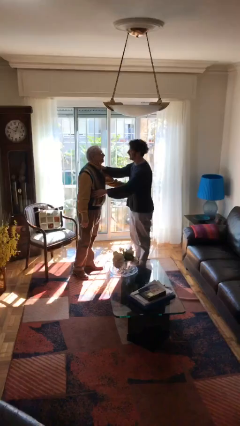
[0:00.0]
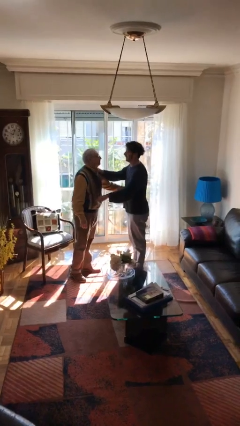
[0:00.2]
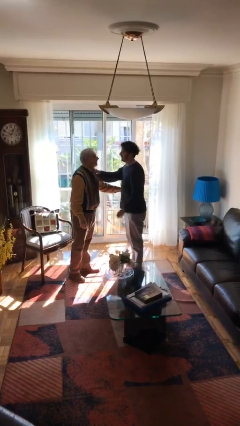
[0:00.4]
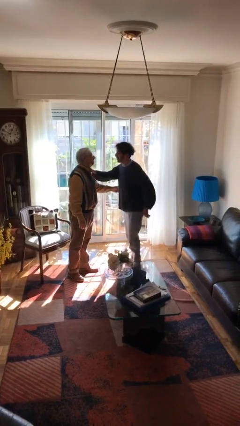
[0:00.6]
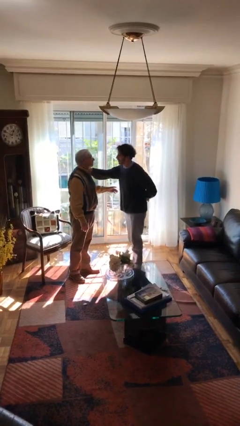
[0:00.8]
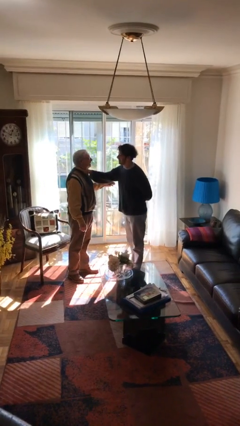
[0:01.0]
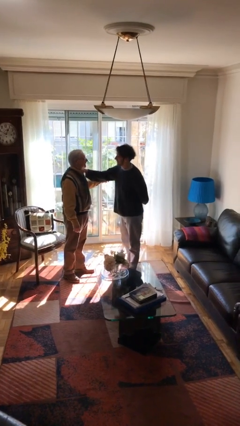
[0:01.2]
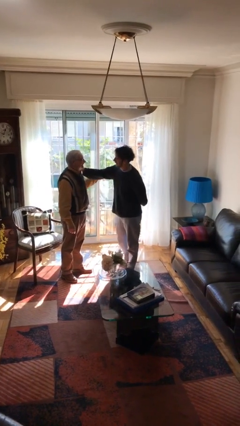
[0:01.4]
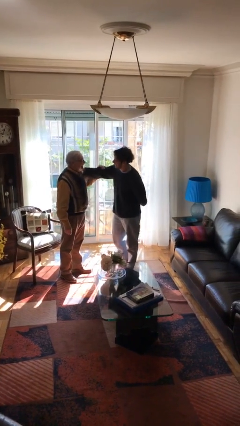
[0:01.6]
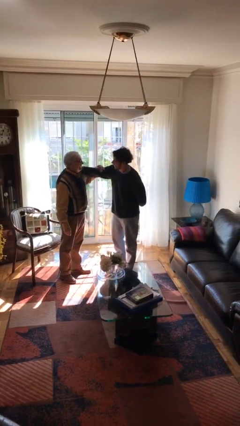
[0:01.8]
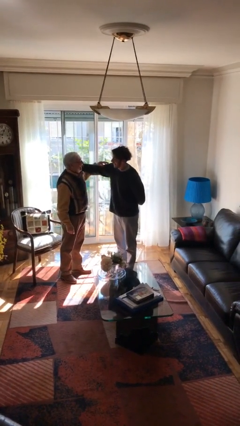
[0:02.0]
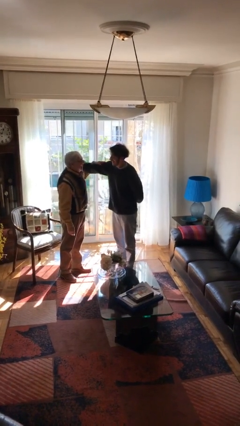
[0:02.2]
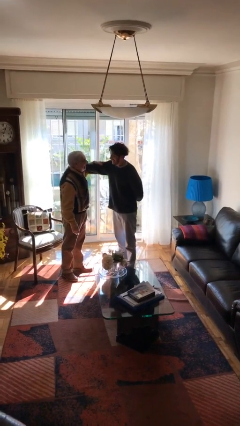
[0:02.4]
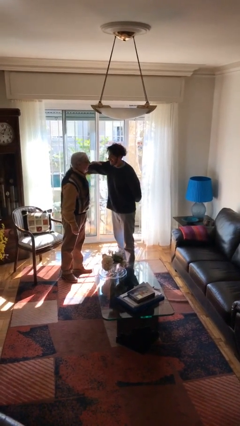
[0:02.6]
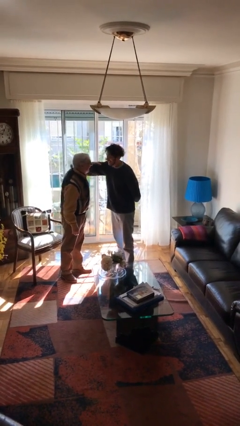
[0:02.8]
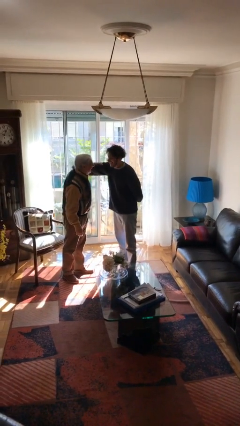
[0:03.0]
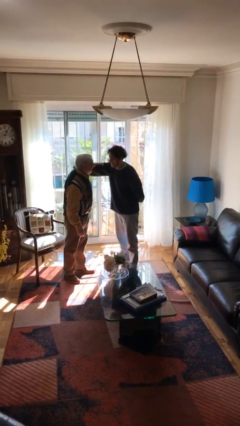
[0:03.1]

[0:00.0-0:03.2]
person talks to person

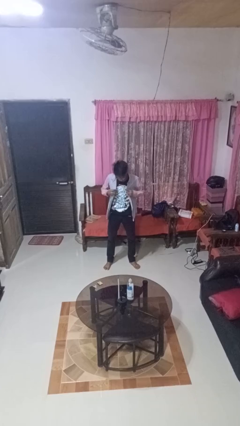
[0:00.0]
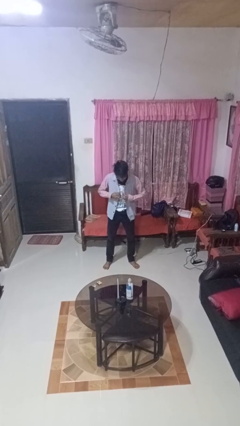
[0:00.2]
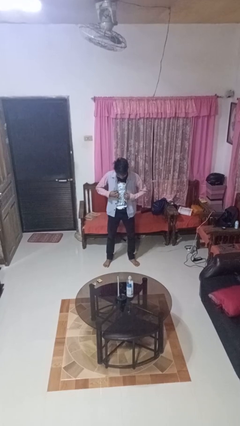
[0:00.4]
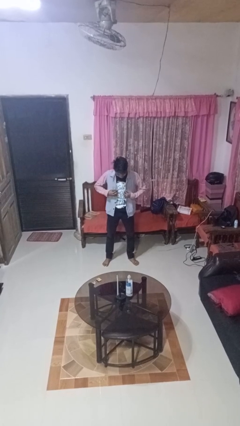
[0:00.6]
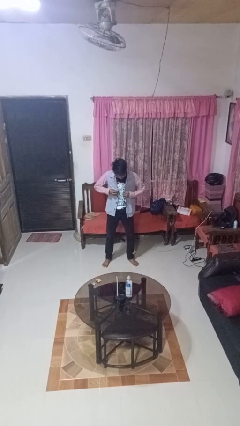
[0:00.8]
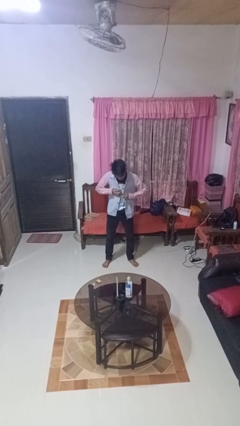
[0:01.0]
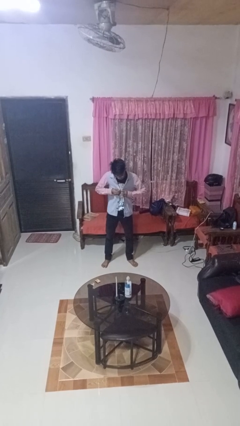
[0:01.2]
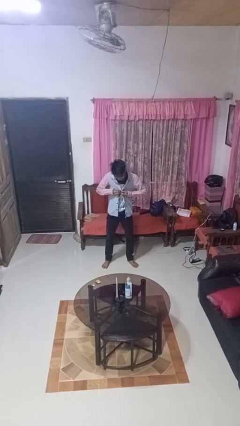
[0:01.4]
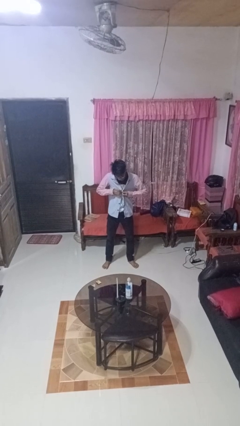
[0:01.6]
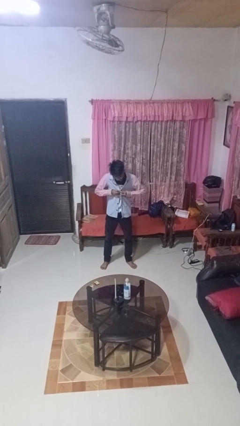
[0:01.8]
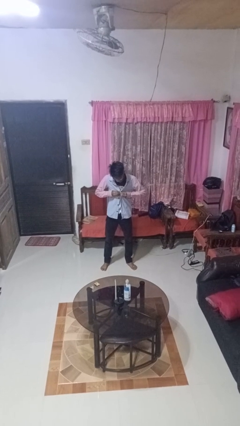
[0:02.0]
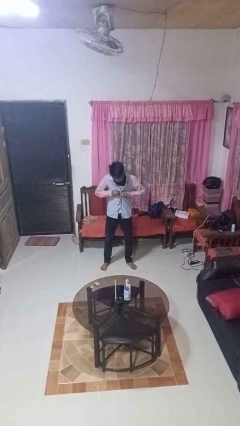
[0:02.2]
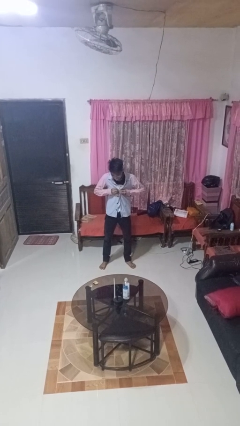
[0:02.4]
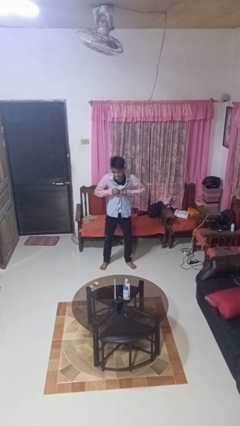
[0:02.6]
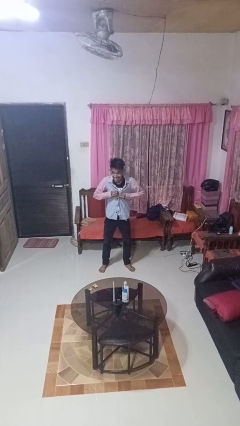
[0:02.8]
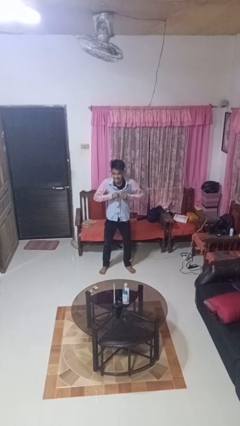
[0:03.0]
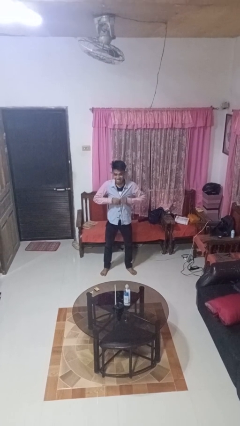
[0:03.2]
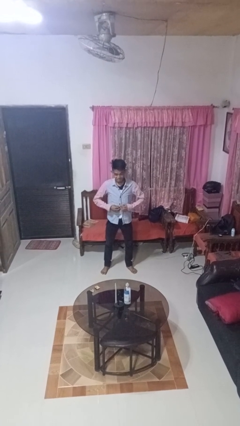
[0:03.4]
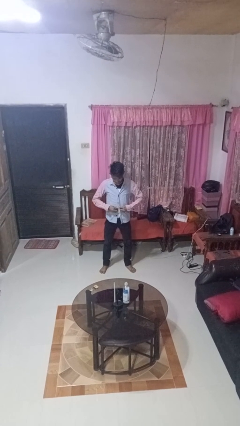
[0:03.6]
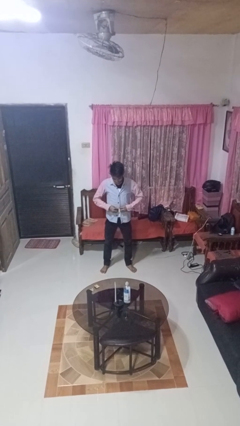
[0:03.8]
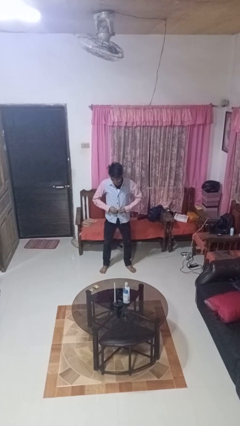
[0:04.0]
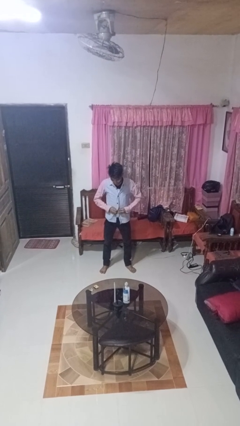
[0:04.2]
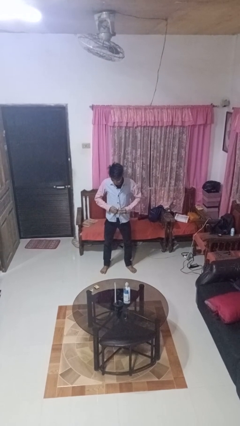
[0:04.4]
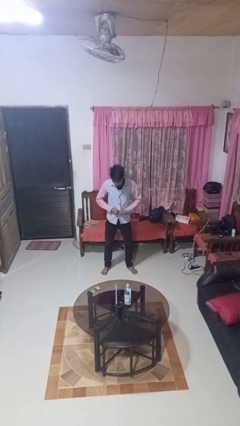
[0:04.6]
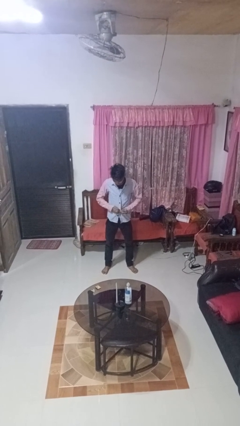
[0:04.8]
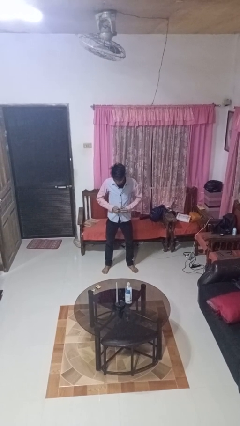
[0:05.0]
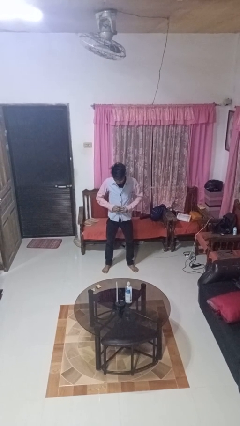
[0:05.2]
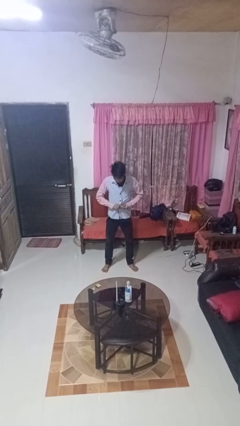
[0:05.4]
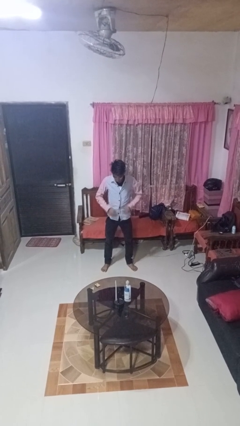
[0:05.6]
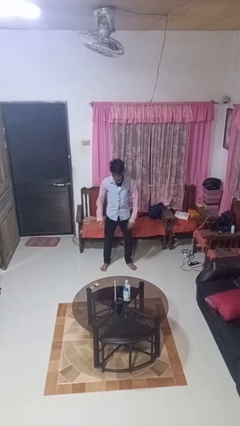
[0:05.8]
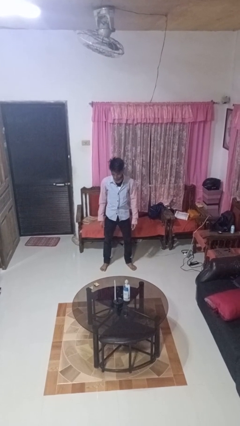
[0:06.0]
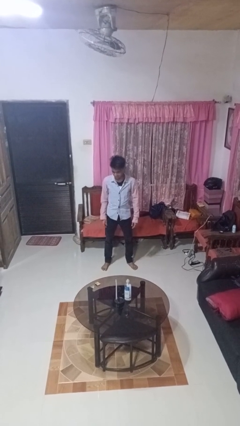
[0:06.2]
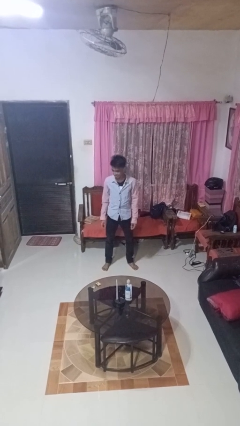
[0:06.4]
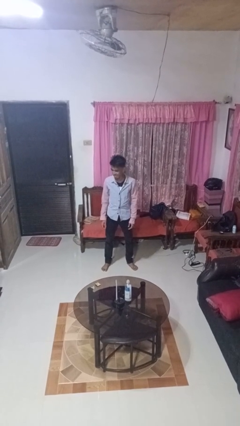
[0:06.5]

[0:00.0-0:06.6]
person buttons shirt

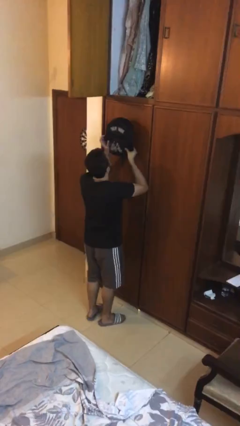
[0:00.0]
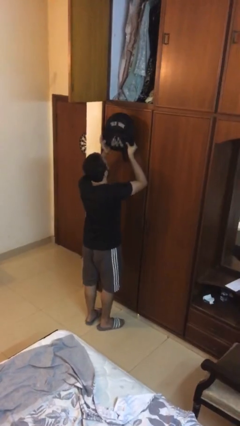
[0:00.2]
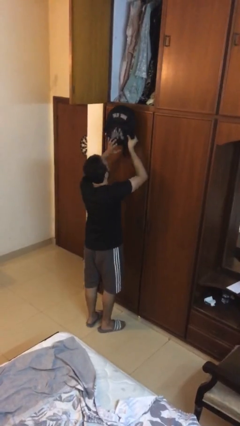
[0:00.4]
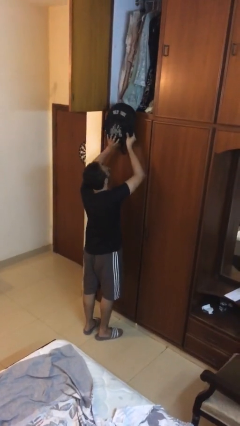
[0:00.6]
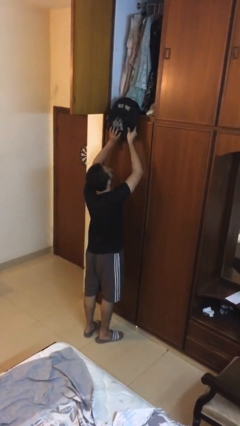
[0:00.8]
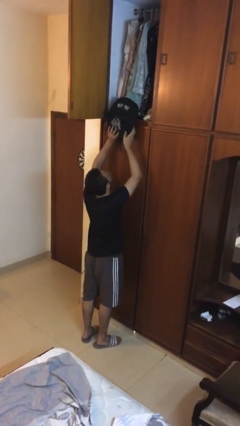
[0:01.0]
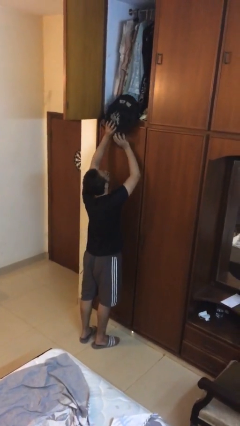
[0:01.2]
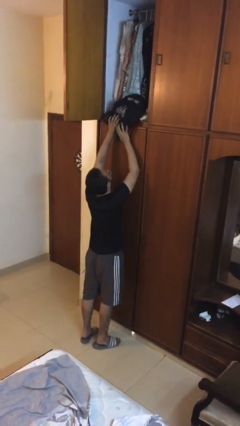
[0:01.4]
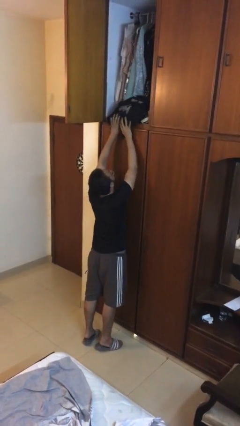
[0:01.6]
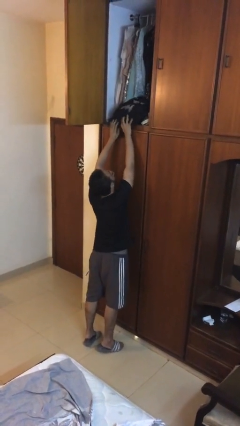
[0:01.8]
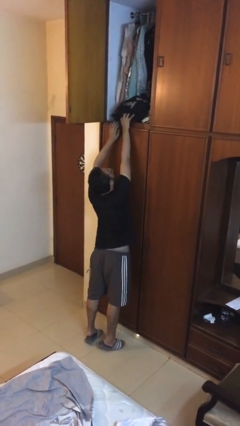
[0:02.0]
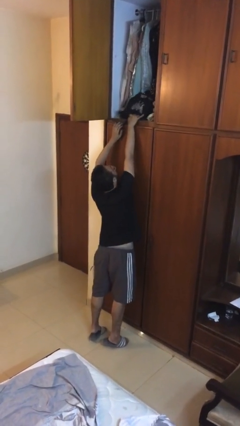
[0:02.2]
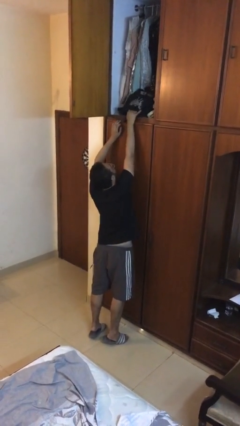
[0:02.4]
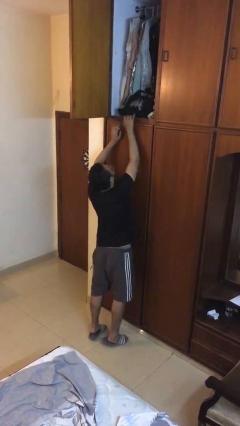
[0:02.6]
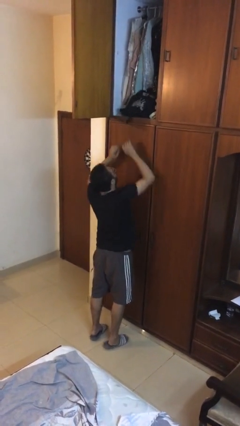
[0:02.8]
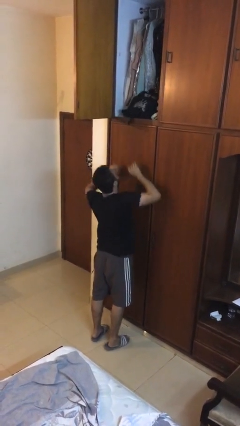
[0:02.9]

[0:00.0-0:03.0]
person puts down object on shelf

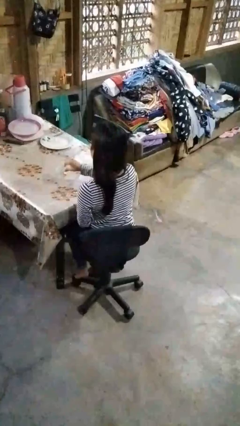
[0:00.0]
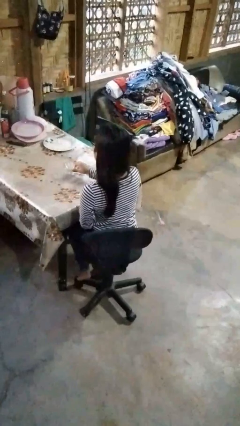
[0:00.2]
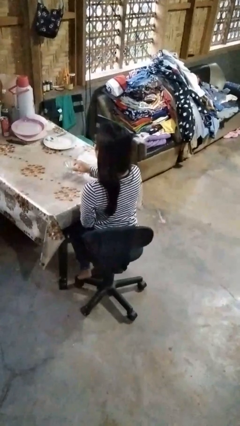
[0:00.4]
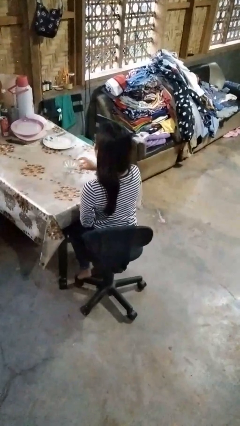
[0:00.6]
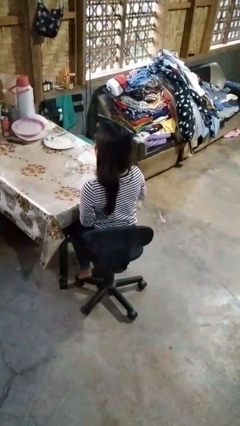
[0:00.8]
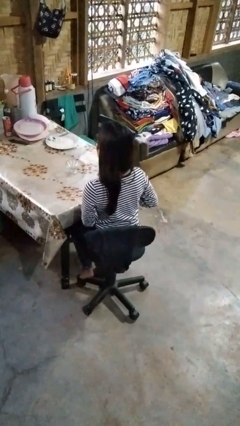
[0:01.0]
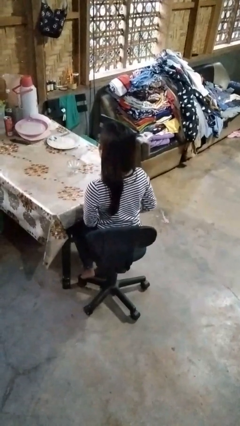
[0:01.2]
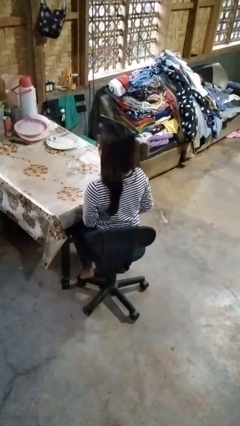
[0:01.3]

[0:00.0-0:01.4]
person sets upright glass

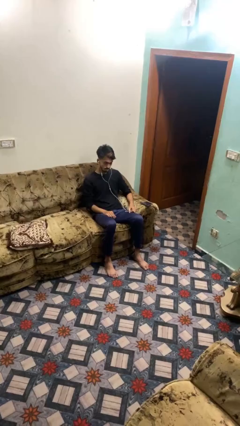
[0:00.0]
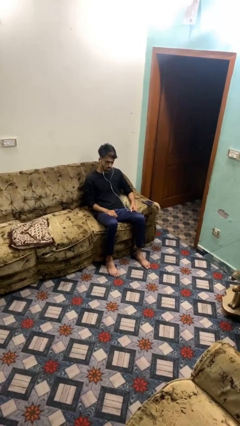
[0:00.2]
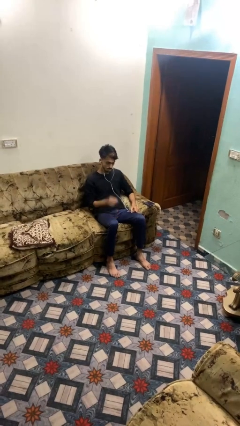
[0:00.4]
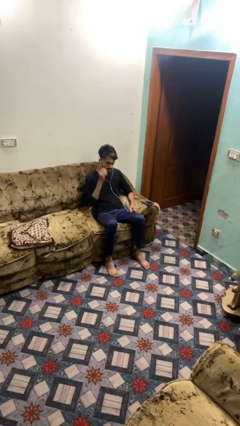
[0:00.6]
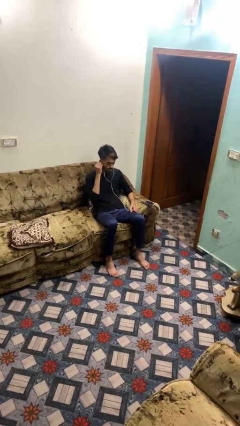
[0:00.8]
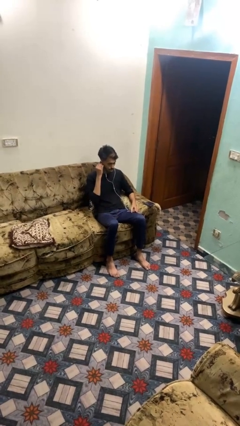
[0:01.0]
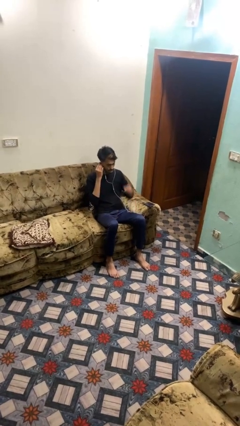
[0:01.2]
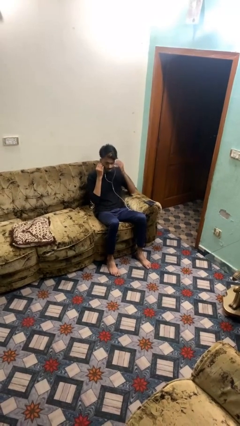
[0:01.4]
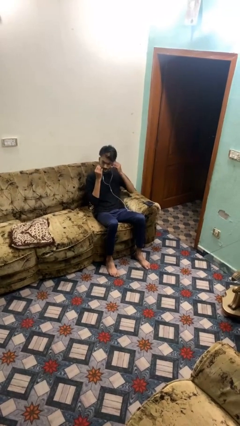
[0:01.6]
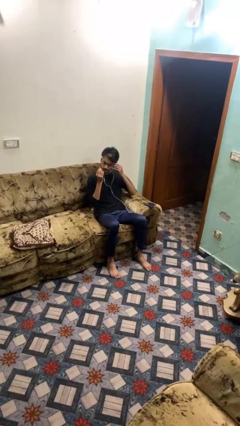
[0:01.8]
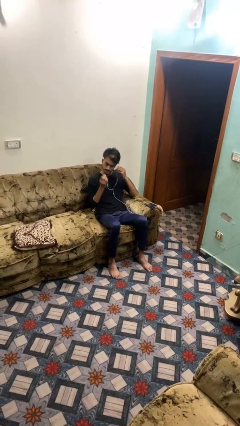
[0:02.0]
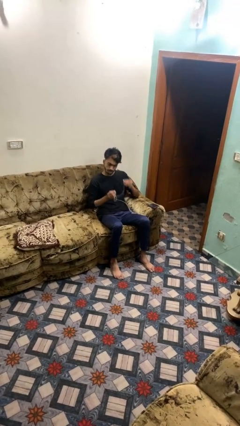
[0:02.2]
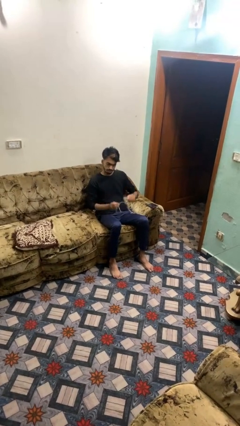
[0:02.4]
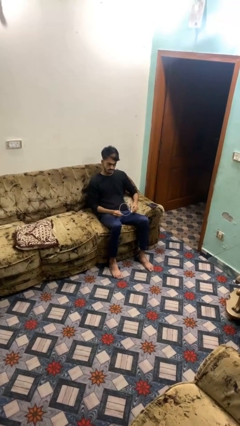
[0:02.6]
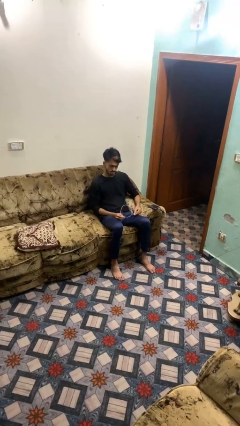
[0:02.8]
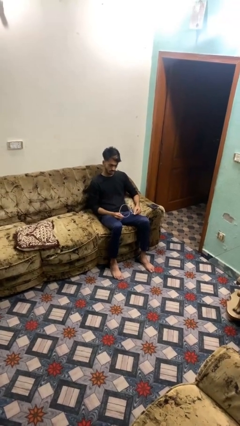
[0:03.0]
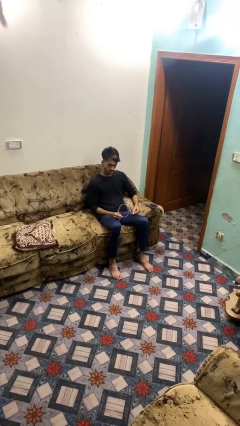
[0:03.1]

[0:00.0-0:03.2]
person takes off headphones

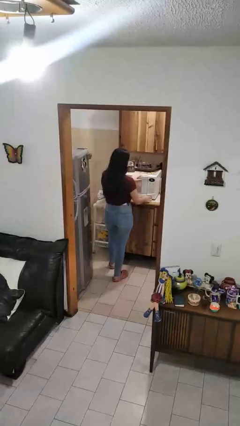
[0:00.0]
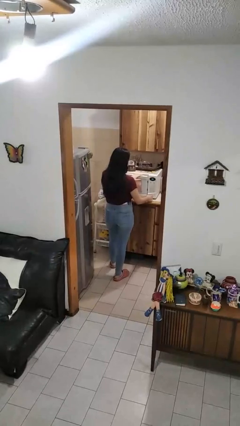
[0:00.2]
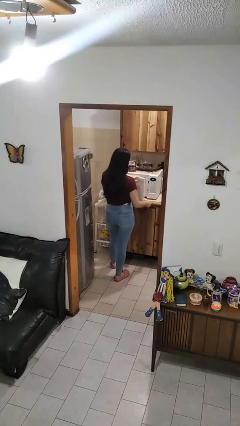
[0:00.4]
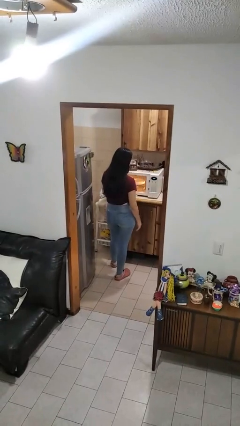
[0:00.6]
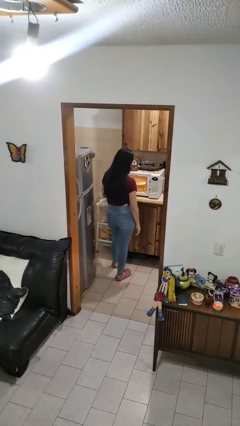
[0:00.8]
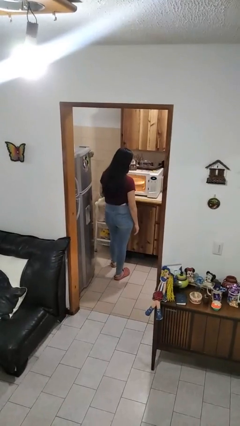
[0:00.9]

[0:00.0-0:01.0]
person opens microwave
